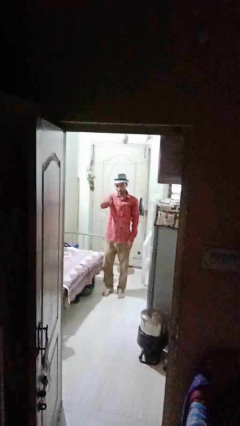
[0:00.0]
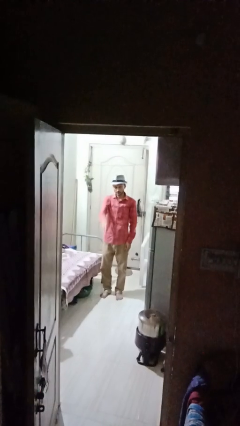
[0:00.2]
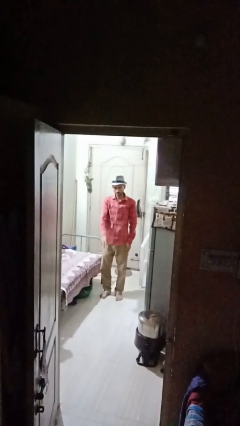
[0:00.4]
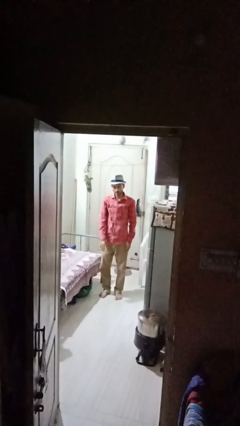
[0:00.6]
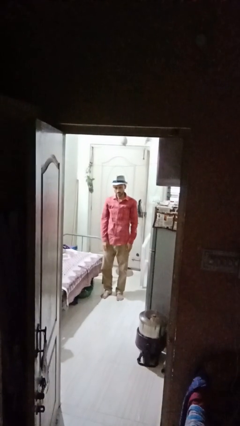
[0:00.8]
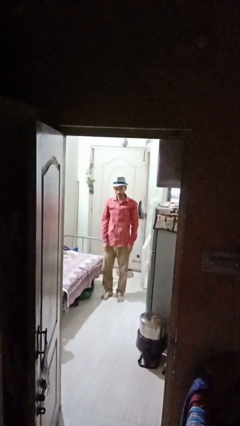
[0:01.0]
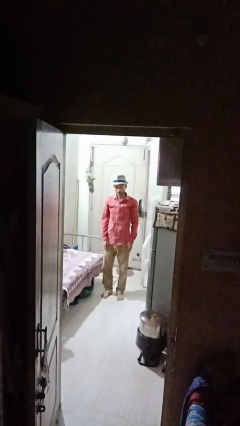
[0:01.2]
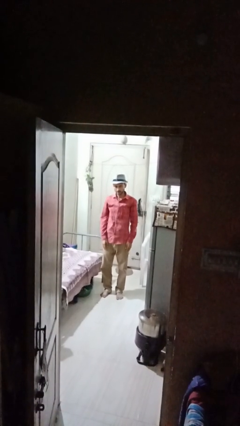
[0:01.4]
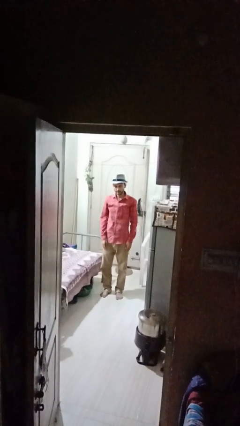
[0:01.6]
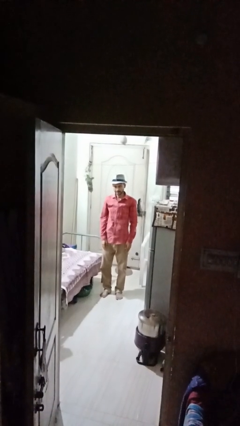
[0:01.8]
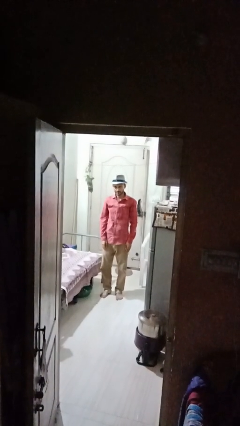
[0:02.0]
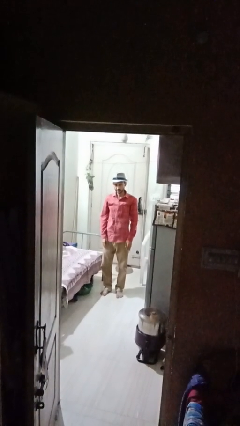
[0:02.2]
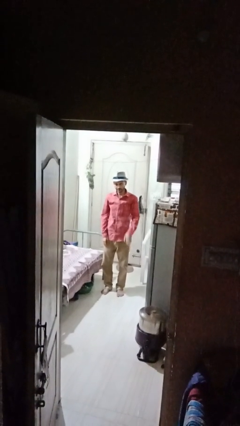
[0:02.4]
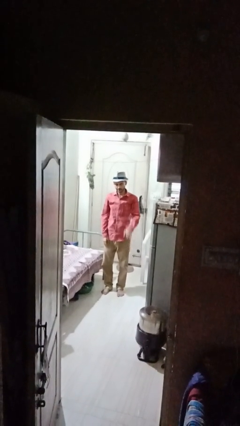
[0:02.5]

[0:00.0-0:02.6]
person gestures lower hand

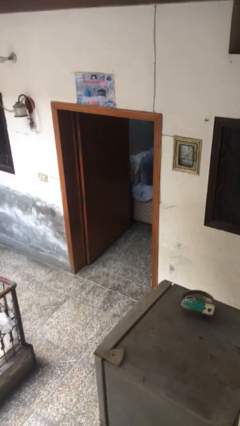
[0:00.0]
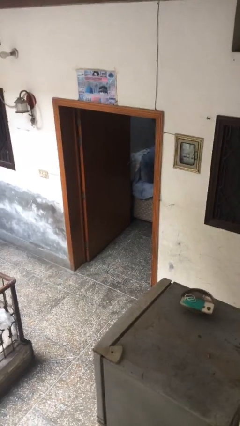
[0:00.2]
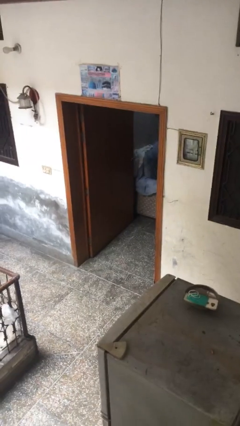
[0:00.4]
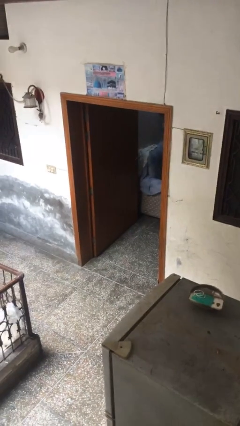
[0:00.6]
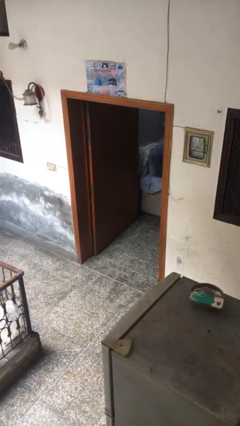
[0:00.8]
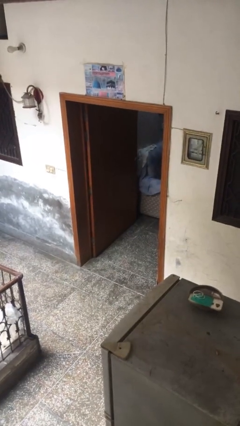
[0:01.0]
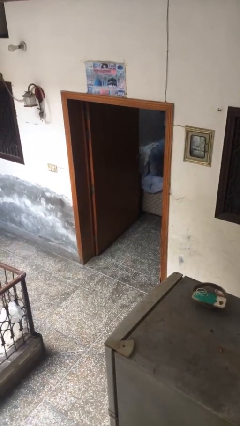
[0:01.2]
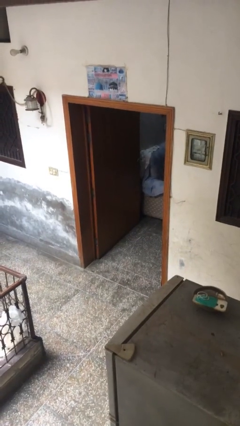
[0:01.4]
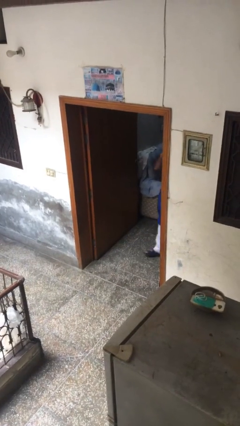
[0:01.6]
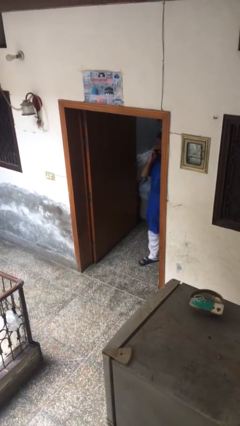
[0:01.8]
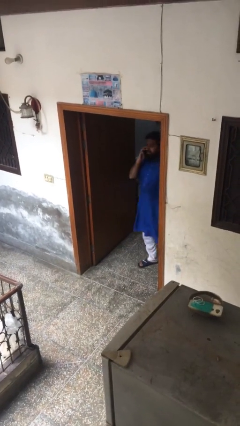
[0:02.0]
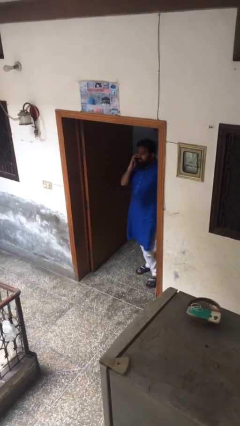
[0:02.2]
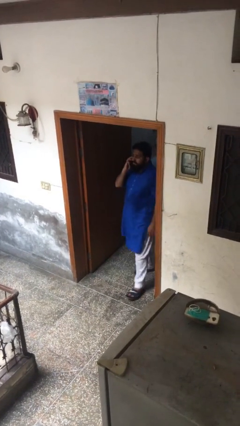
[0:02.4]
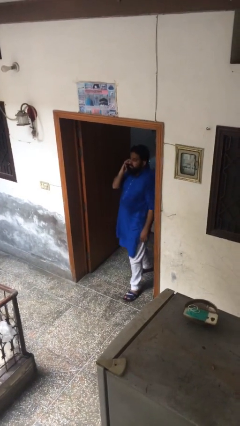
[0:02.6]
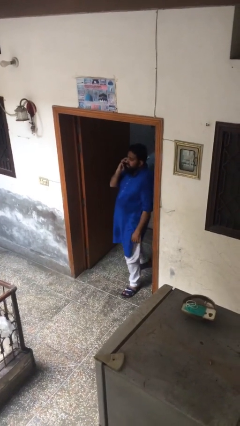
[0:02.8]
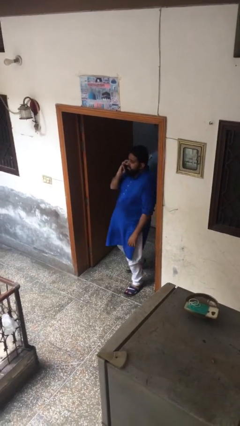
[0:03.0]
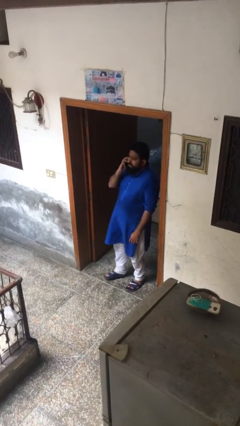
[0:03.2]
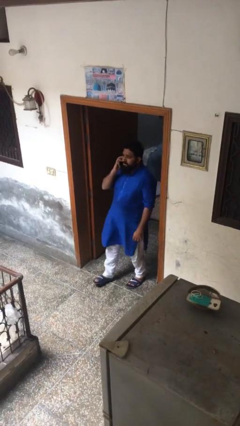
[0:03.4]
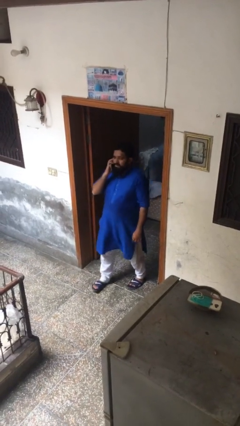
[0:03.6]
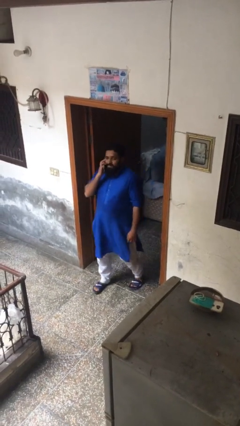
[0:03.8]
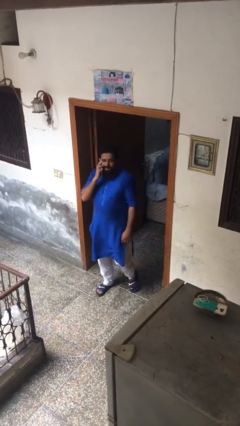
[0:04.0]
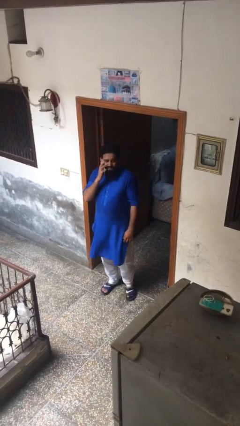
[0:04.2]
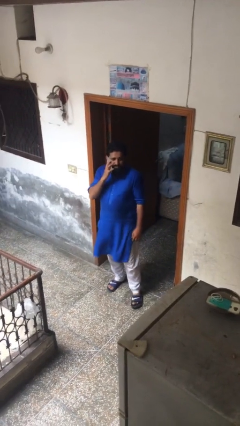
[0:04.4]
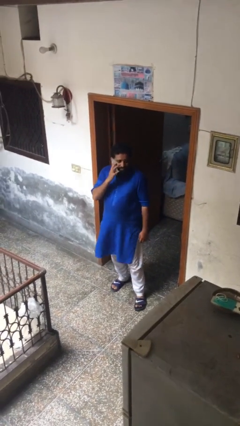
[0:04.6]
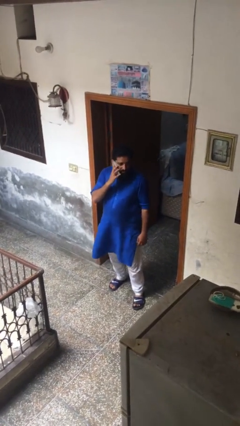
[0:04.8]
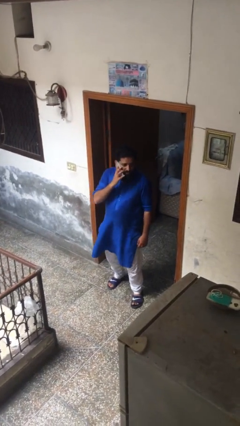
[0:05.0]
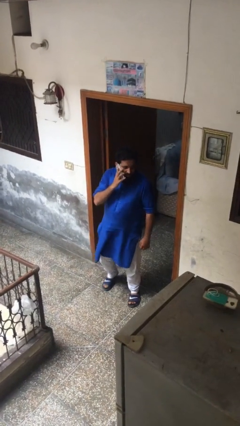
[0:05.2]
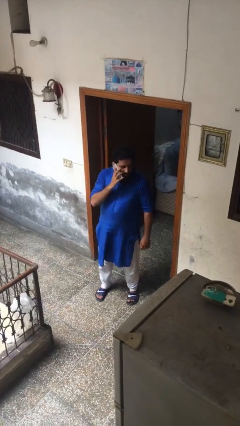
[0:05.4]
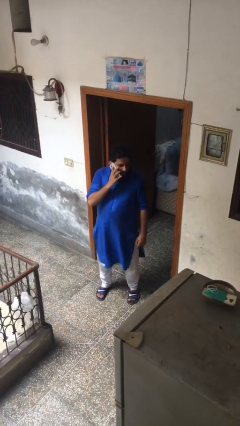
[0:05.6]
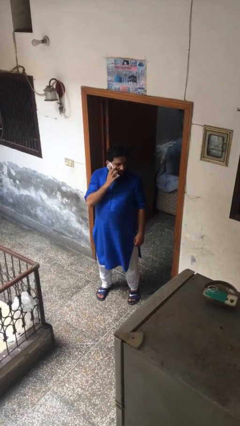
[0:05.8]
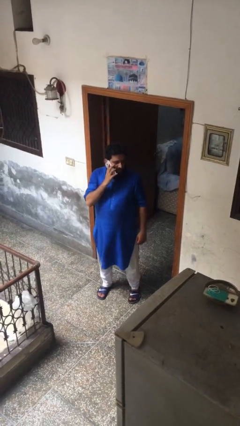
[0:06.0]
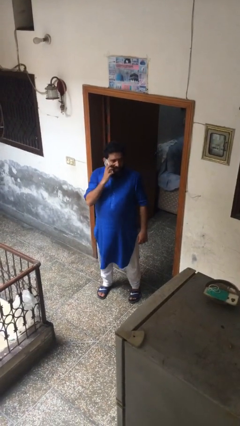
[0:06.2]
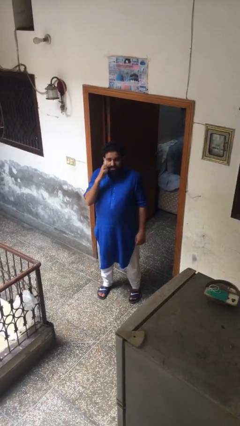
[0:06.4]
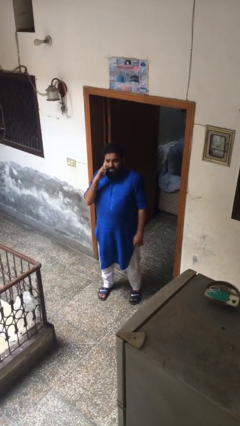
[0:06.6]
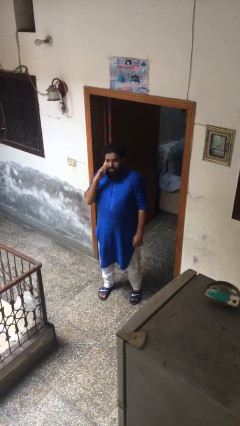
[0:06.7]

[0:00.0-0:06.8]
person enters scene through structure

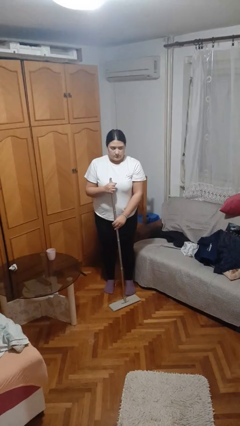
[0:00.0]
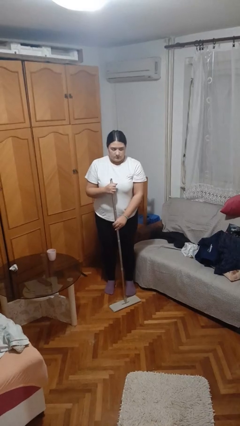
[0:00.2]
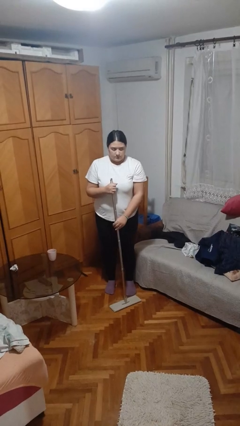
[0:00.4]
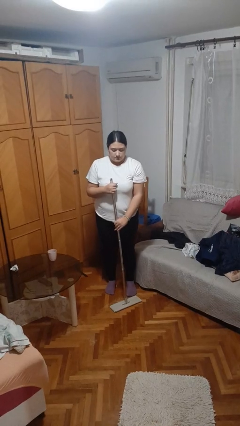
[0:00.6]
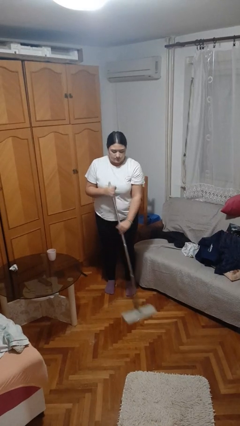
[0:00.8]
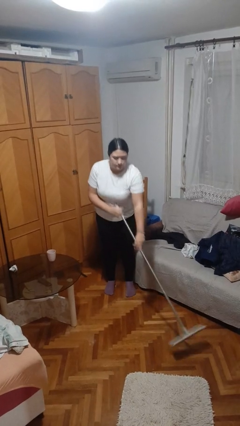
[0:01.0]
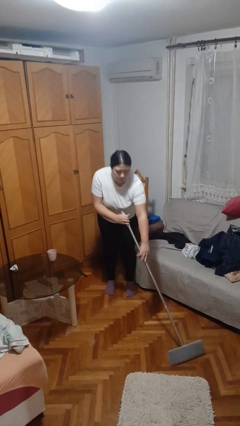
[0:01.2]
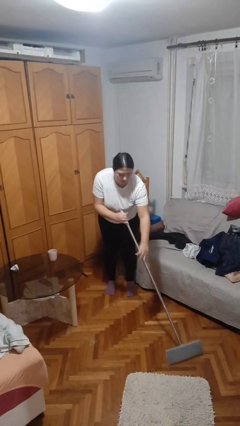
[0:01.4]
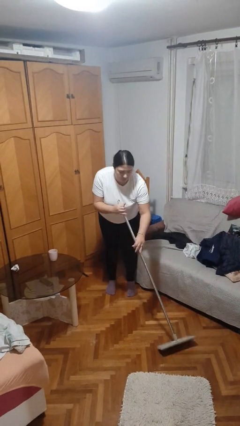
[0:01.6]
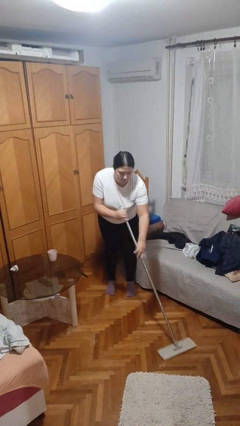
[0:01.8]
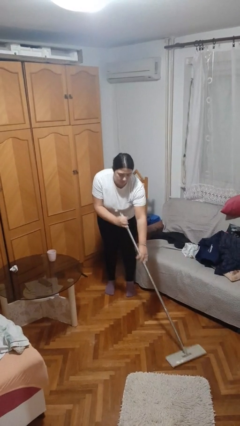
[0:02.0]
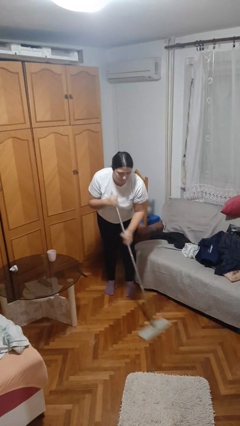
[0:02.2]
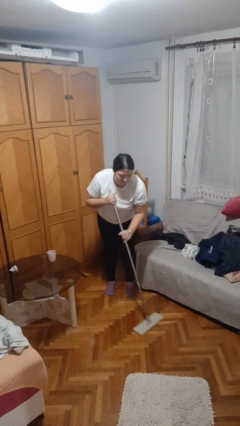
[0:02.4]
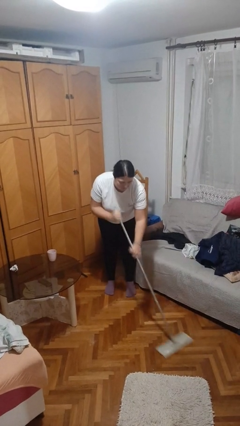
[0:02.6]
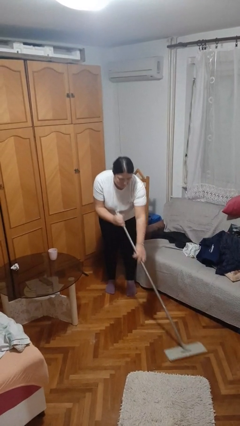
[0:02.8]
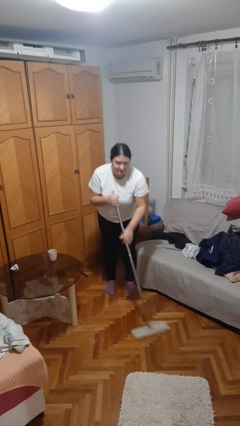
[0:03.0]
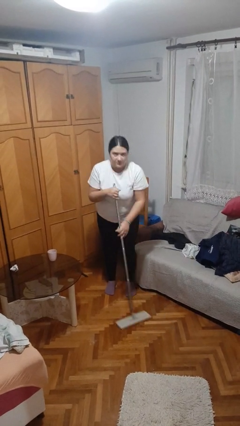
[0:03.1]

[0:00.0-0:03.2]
person mops

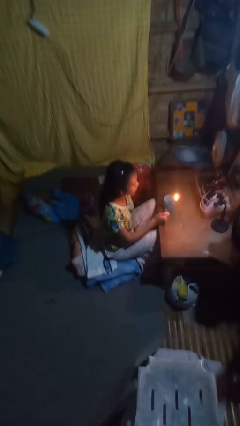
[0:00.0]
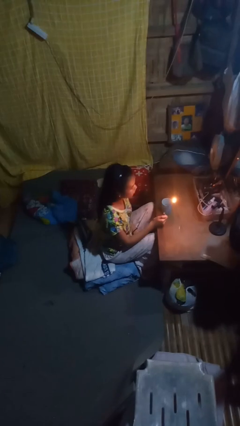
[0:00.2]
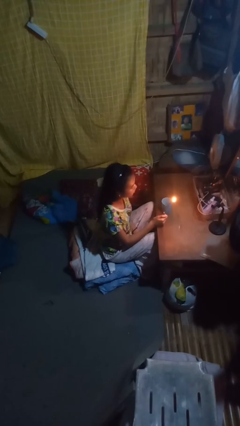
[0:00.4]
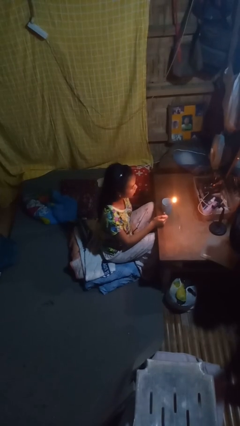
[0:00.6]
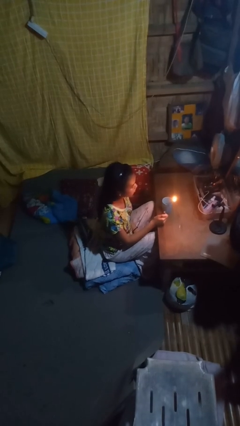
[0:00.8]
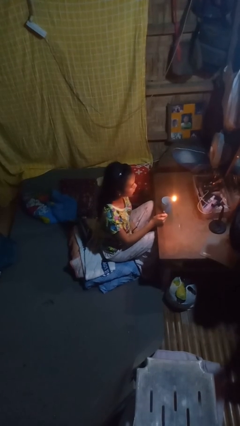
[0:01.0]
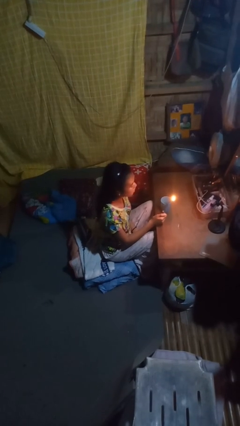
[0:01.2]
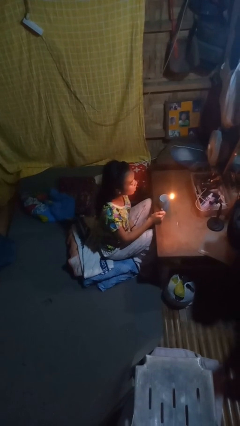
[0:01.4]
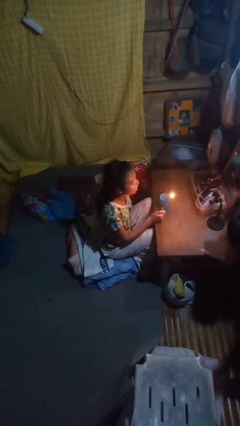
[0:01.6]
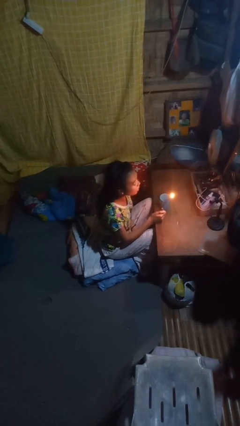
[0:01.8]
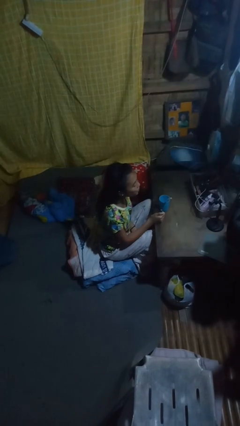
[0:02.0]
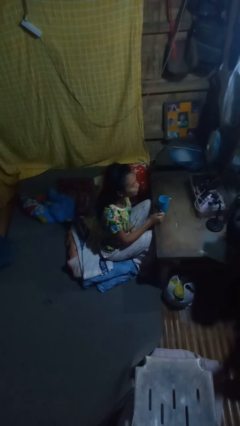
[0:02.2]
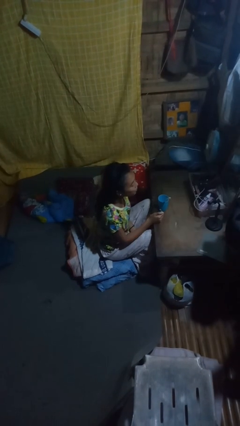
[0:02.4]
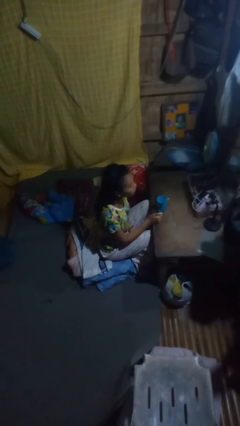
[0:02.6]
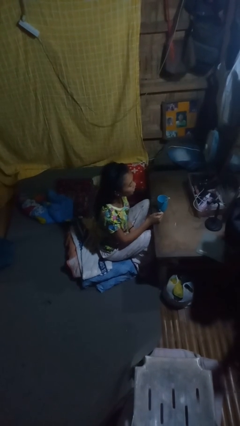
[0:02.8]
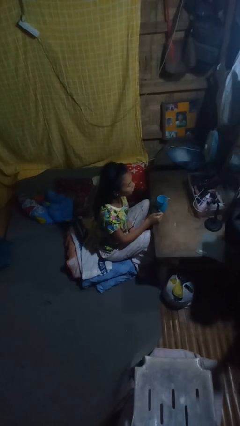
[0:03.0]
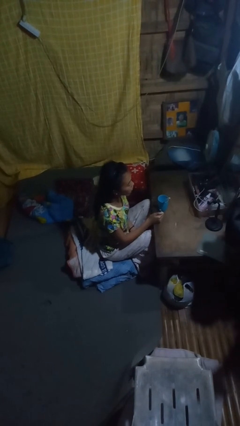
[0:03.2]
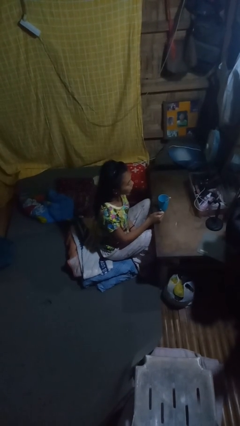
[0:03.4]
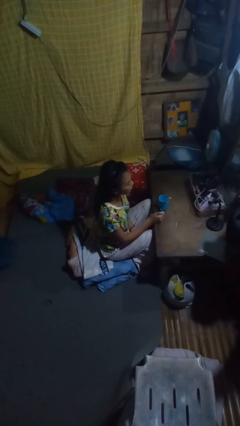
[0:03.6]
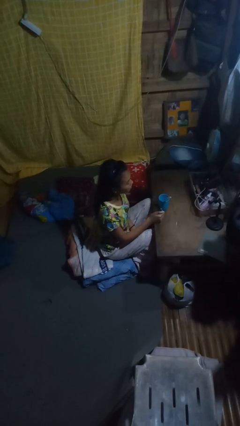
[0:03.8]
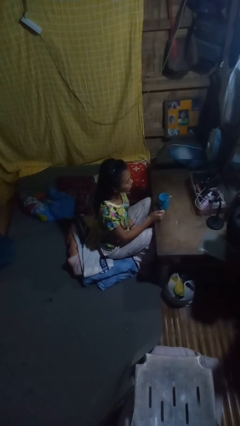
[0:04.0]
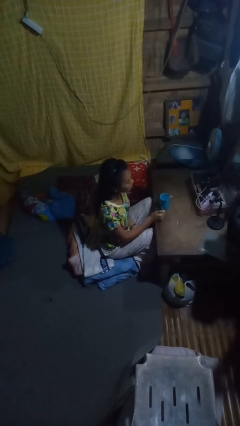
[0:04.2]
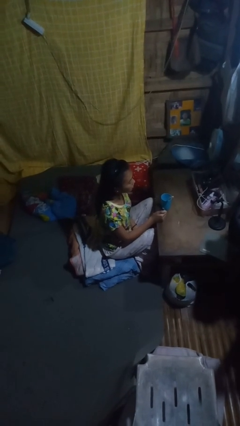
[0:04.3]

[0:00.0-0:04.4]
person extinguishes candle

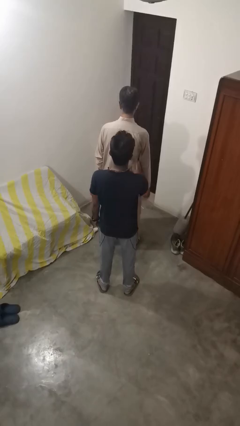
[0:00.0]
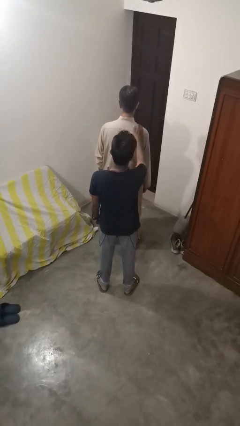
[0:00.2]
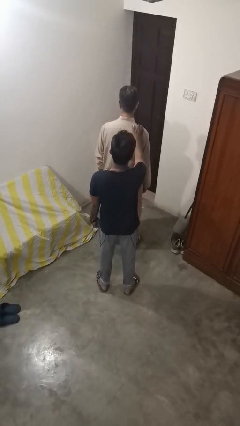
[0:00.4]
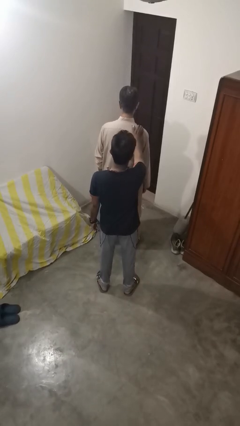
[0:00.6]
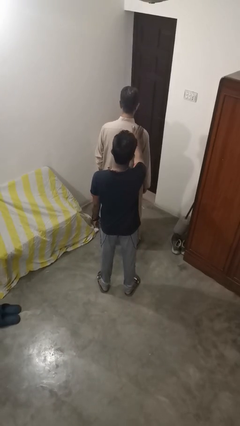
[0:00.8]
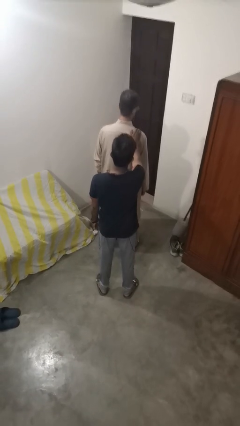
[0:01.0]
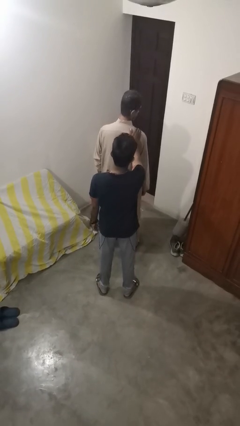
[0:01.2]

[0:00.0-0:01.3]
person grabs person by shoulder
